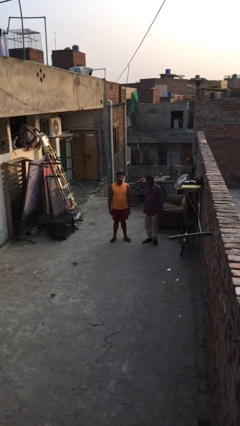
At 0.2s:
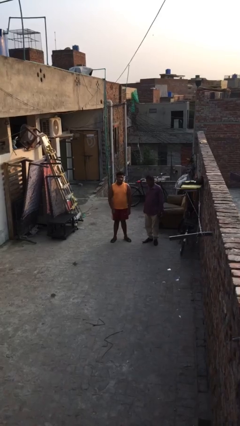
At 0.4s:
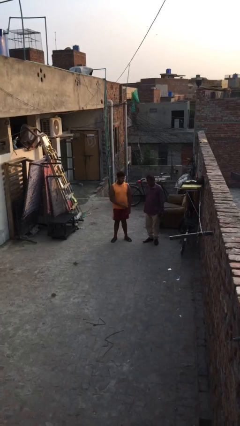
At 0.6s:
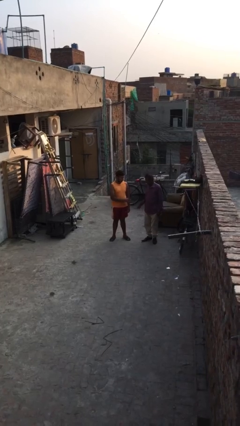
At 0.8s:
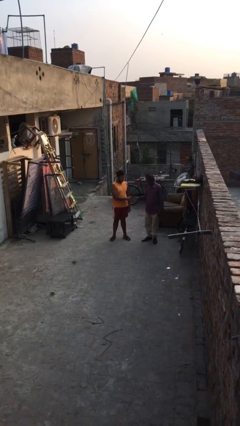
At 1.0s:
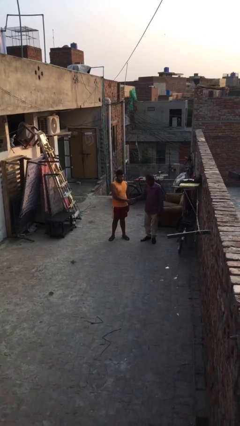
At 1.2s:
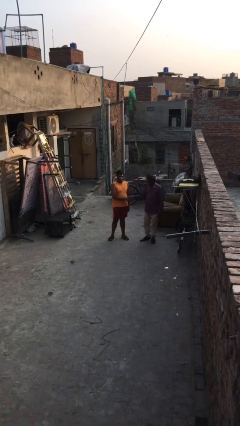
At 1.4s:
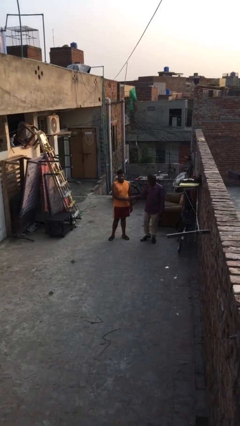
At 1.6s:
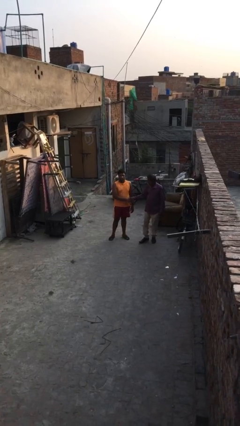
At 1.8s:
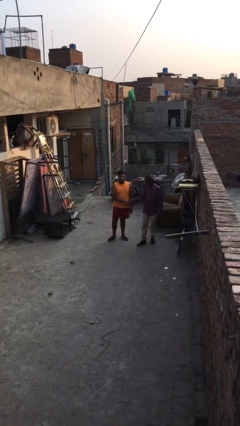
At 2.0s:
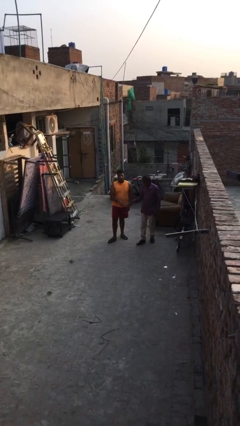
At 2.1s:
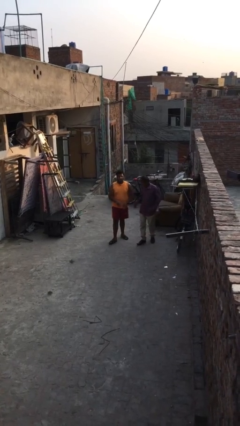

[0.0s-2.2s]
person shakes hand

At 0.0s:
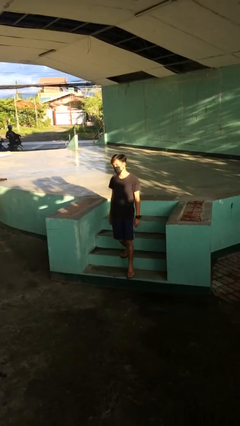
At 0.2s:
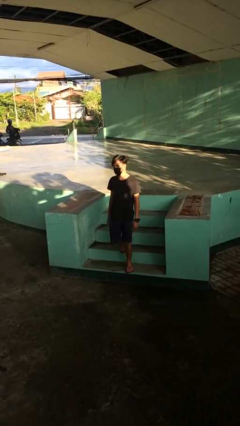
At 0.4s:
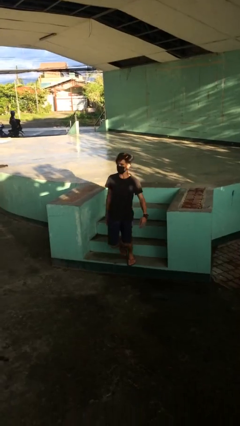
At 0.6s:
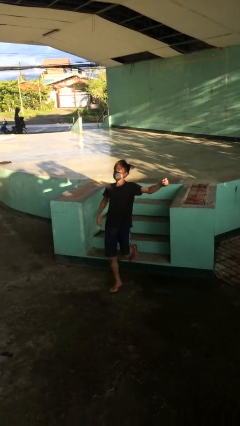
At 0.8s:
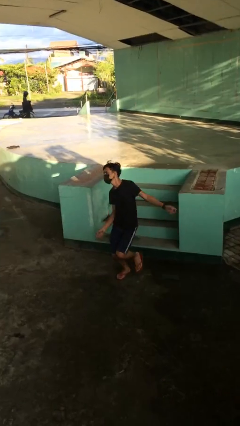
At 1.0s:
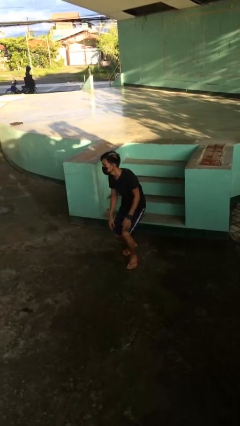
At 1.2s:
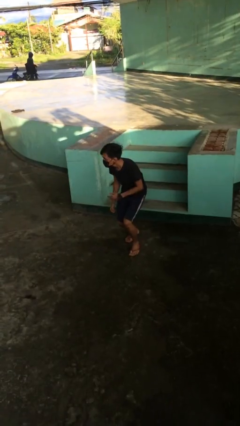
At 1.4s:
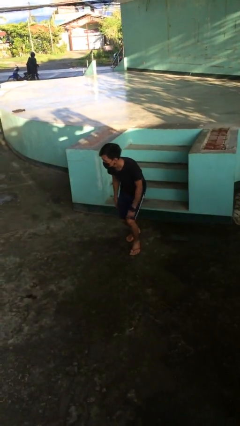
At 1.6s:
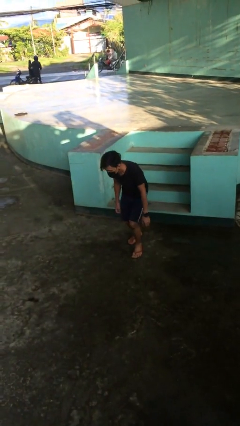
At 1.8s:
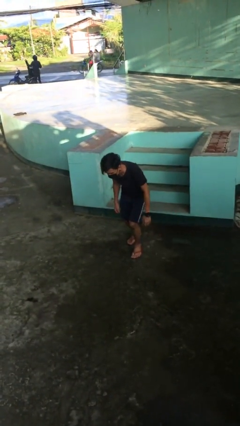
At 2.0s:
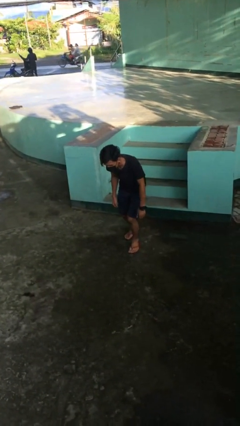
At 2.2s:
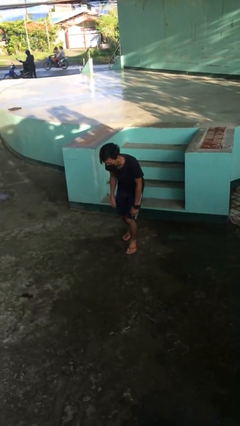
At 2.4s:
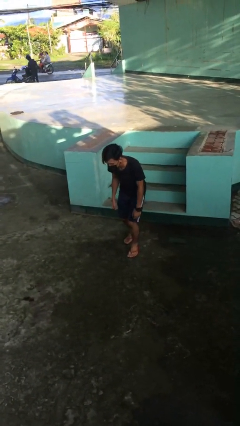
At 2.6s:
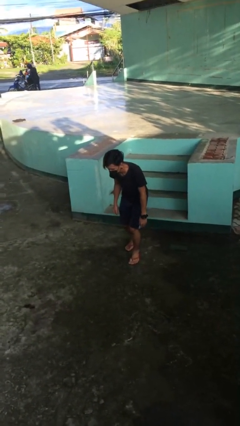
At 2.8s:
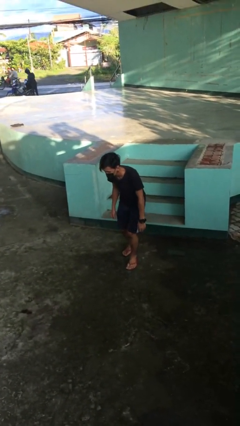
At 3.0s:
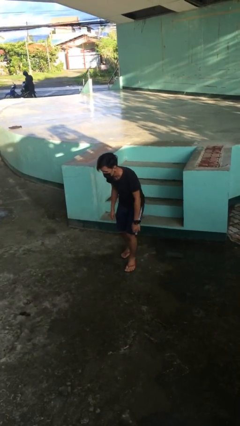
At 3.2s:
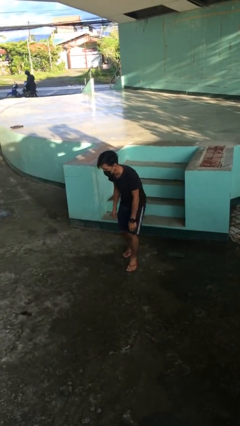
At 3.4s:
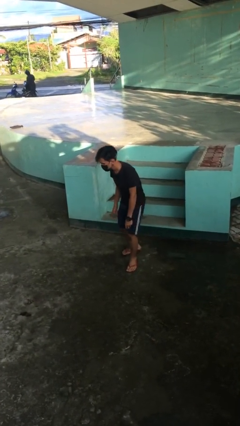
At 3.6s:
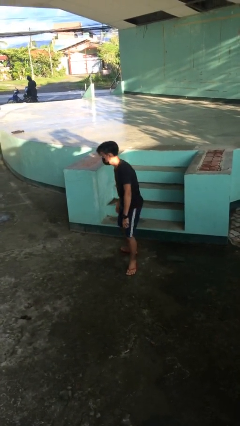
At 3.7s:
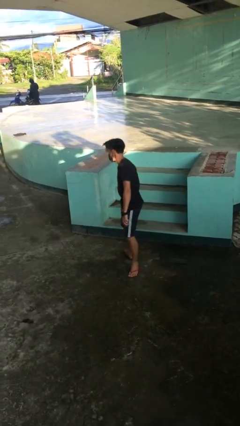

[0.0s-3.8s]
person trips on stair

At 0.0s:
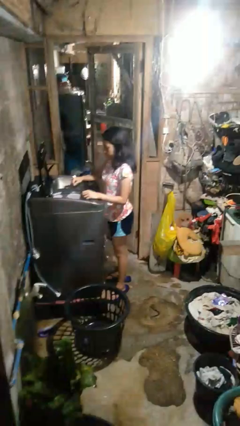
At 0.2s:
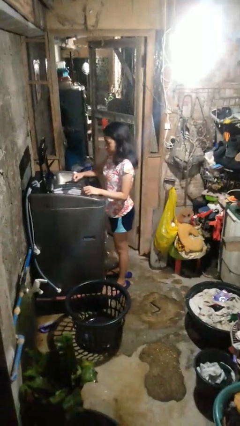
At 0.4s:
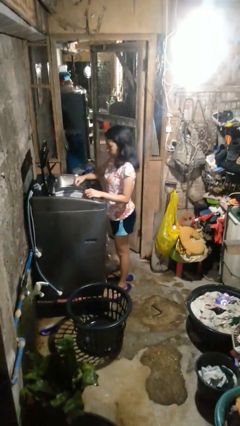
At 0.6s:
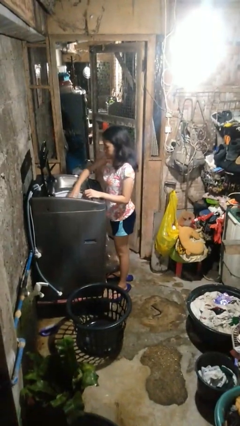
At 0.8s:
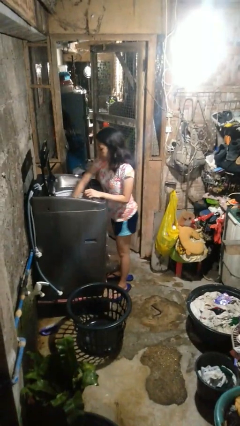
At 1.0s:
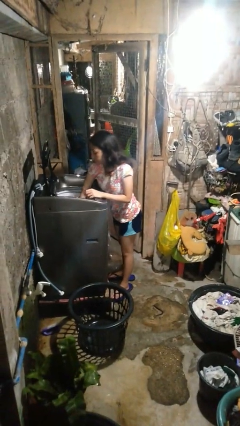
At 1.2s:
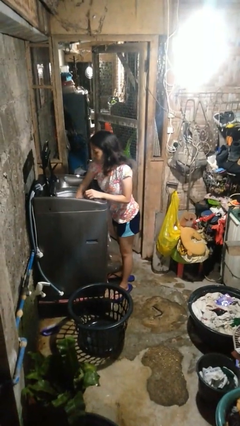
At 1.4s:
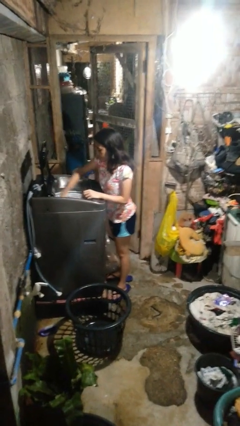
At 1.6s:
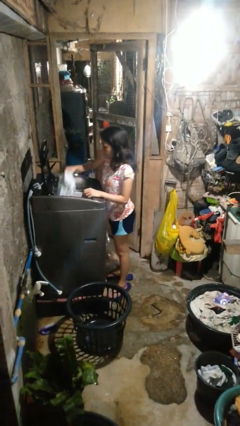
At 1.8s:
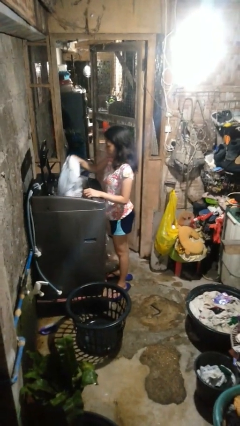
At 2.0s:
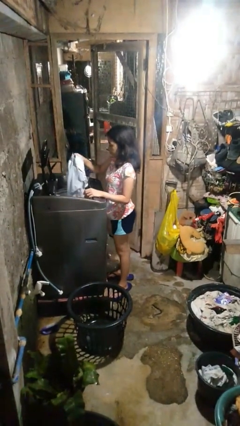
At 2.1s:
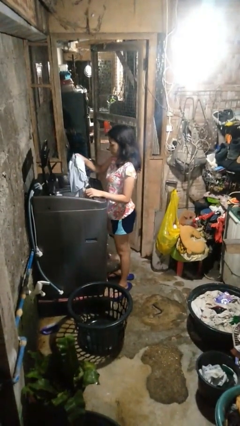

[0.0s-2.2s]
person unloads clotheswasher

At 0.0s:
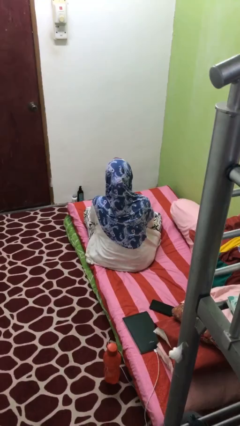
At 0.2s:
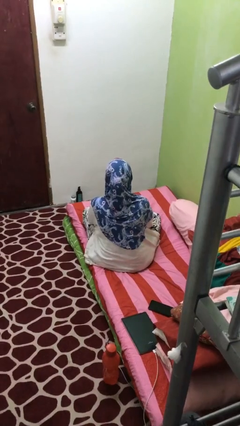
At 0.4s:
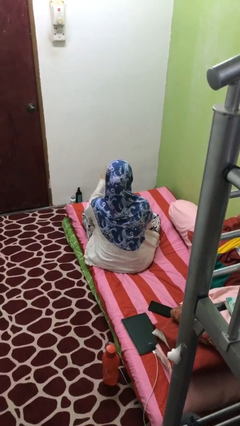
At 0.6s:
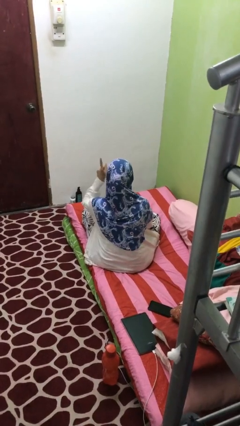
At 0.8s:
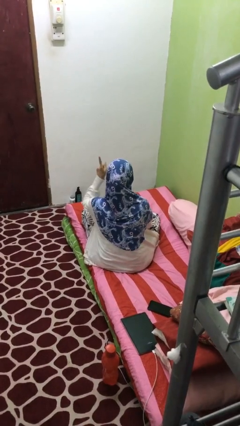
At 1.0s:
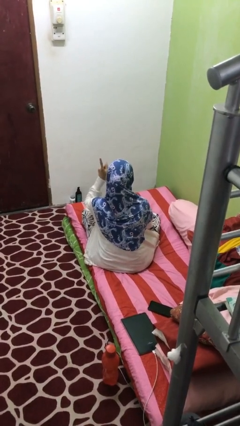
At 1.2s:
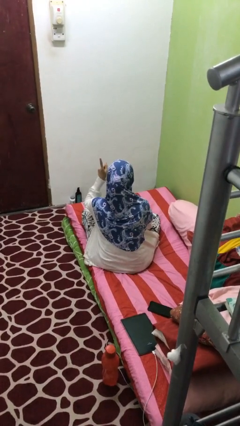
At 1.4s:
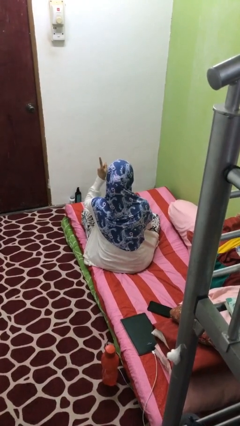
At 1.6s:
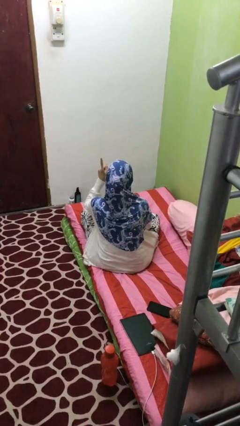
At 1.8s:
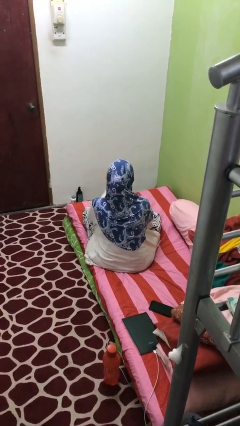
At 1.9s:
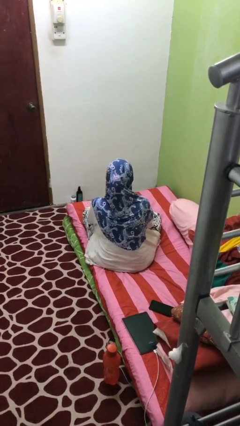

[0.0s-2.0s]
person gestures number one

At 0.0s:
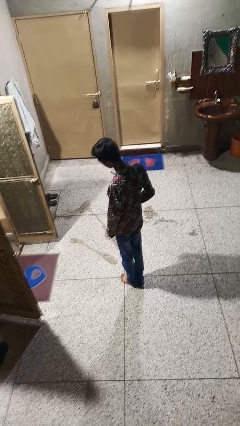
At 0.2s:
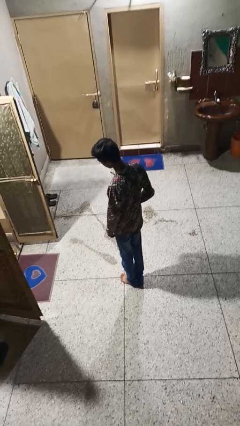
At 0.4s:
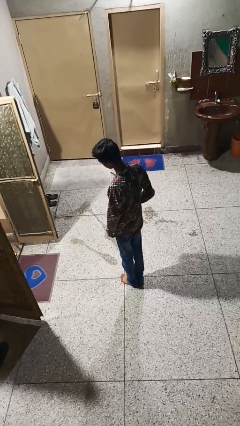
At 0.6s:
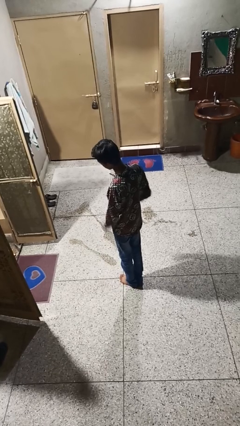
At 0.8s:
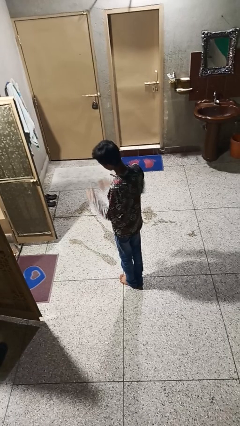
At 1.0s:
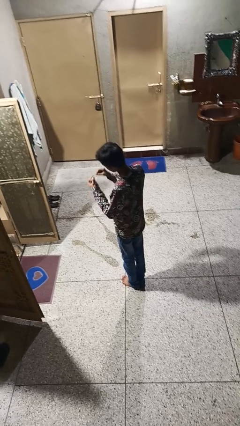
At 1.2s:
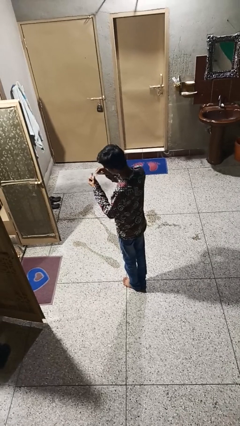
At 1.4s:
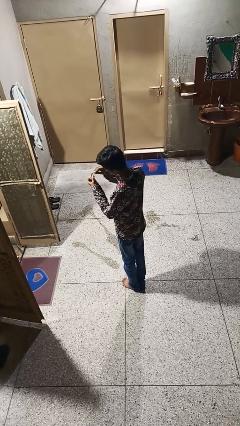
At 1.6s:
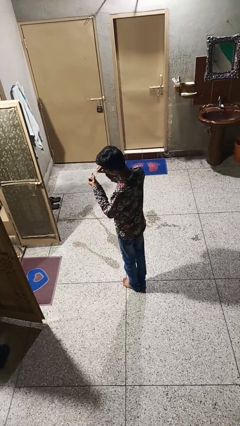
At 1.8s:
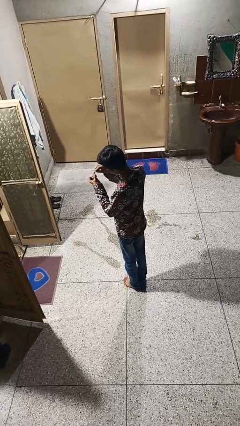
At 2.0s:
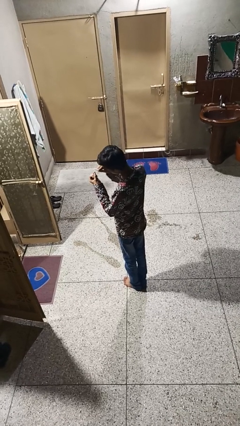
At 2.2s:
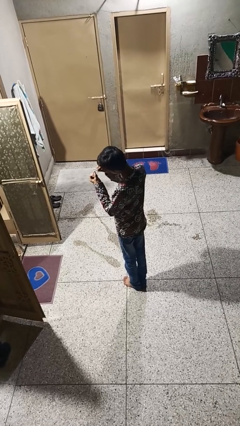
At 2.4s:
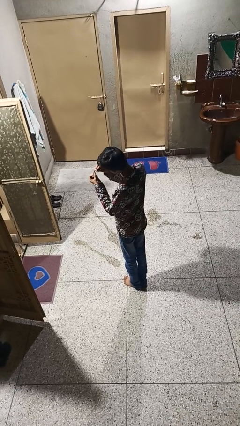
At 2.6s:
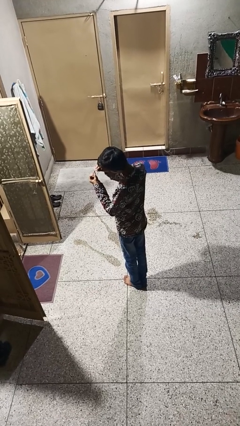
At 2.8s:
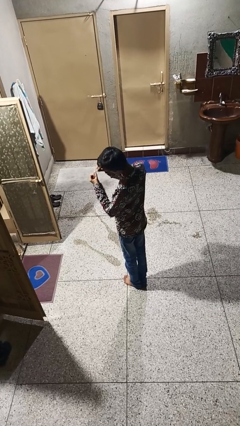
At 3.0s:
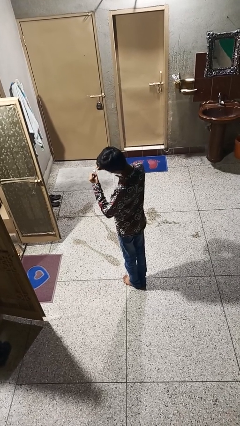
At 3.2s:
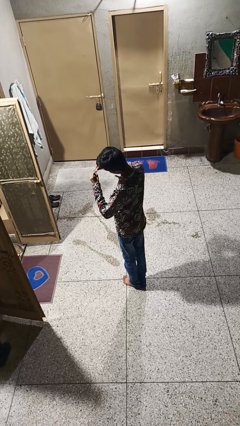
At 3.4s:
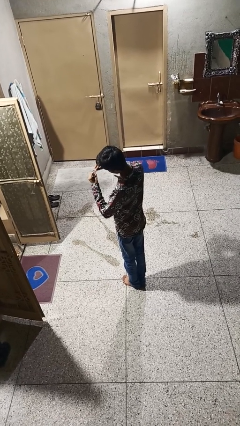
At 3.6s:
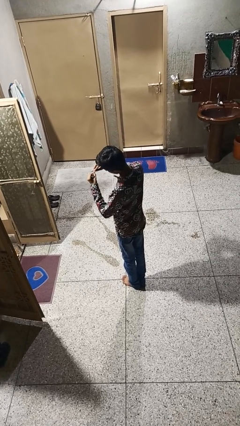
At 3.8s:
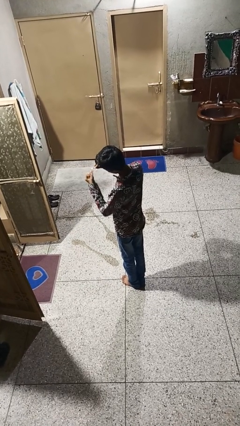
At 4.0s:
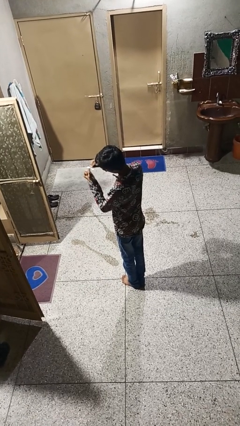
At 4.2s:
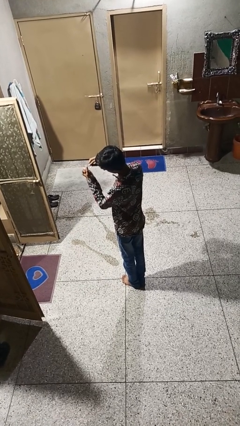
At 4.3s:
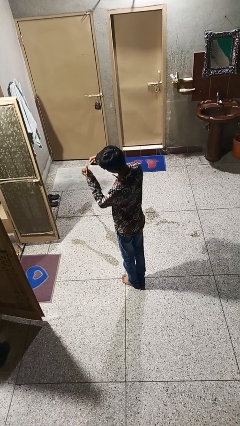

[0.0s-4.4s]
person files fingernails

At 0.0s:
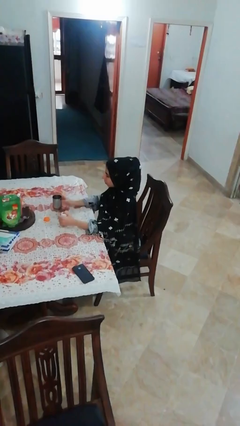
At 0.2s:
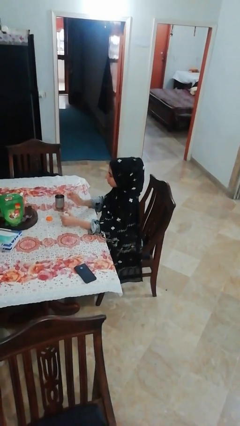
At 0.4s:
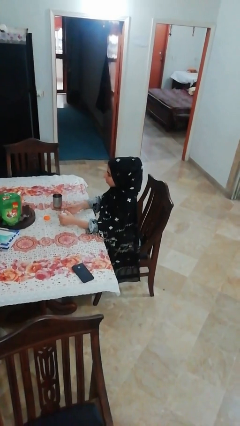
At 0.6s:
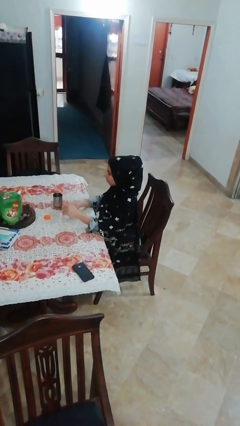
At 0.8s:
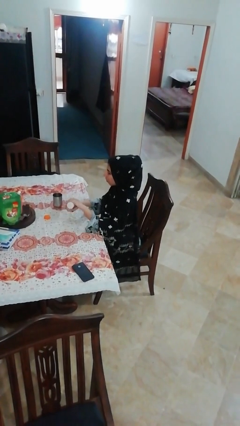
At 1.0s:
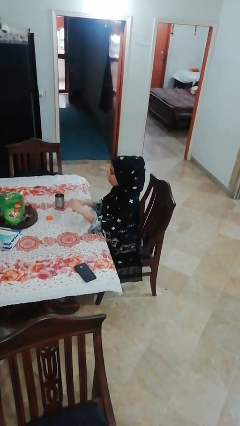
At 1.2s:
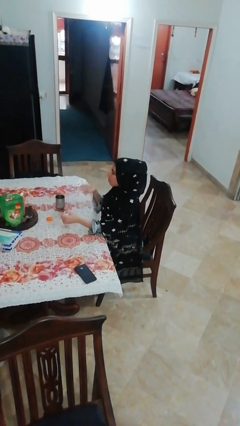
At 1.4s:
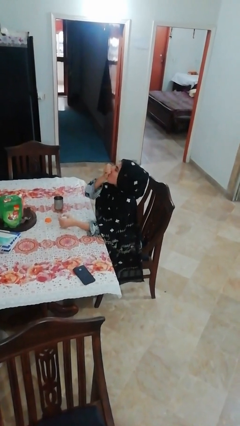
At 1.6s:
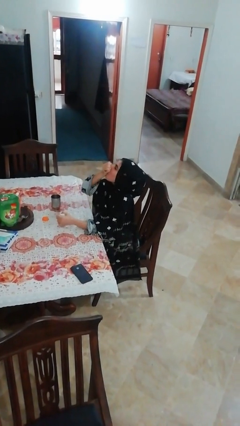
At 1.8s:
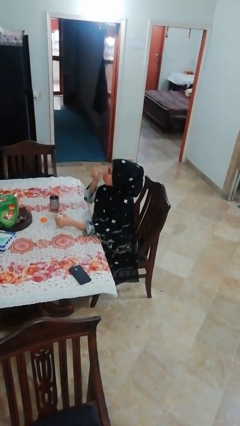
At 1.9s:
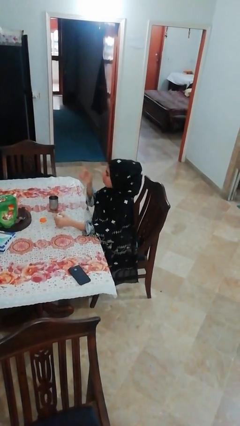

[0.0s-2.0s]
person takes medicine pills

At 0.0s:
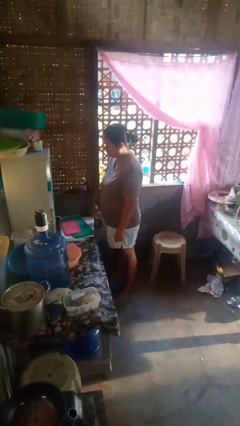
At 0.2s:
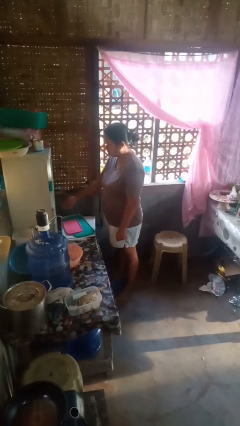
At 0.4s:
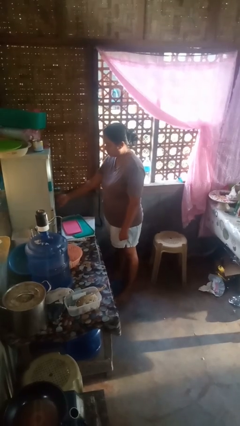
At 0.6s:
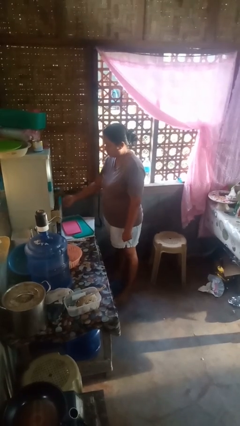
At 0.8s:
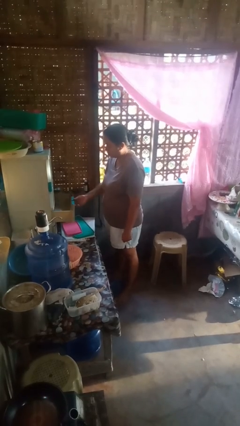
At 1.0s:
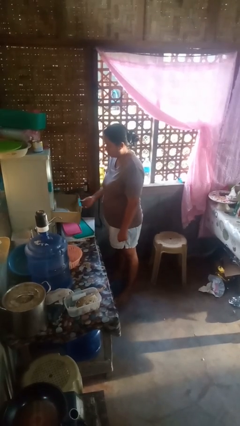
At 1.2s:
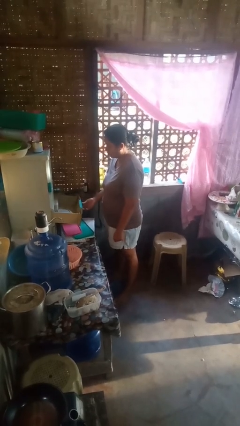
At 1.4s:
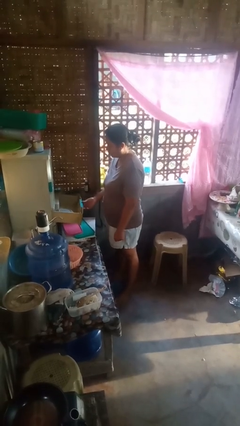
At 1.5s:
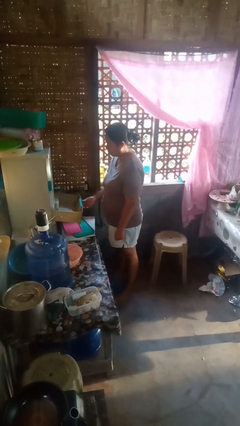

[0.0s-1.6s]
person opens kitchen drawer
